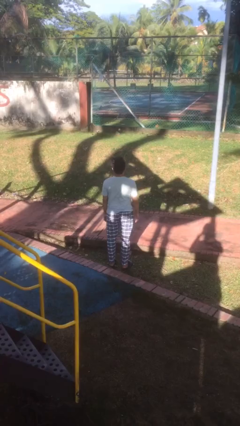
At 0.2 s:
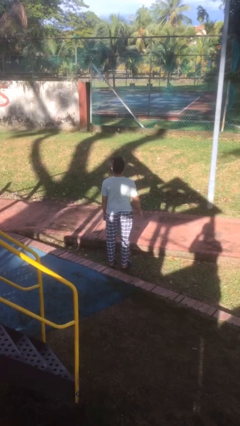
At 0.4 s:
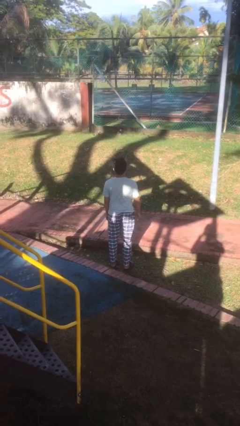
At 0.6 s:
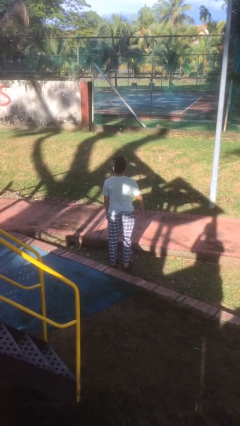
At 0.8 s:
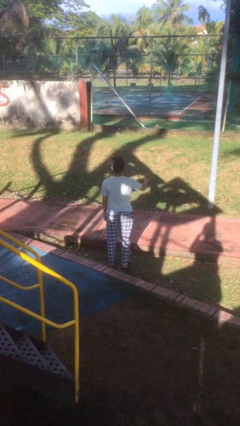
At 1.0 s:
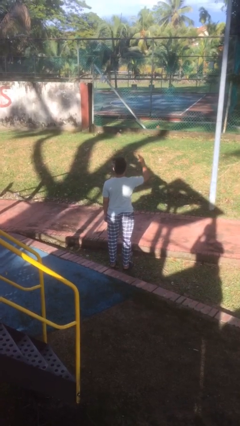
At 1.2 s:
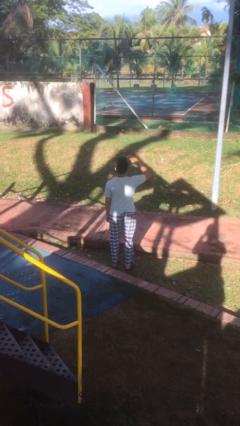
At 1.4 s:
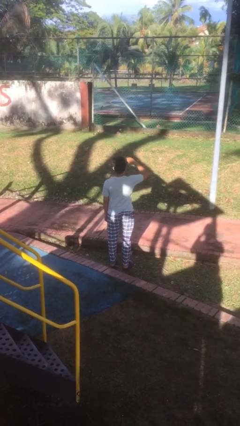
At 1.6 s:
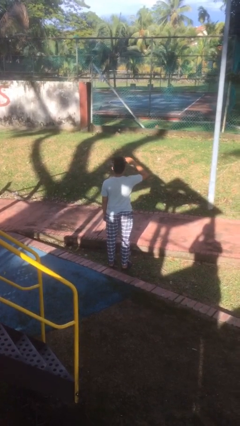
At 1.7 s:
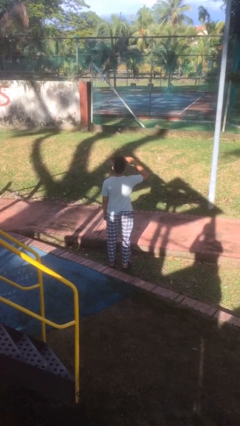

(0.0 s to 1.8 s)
person salutes

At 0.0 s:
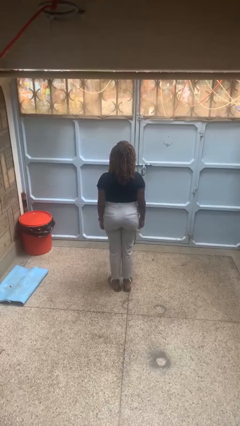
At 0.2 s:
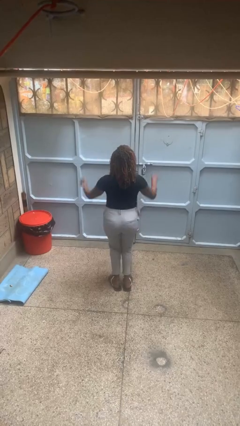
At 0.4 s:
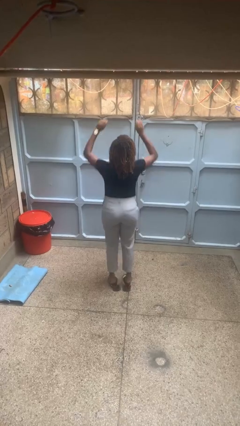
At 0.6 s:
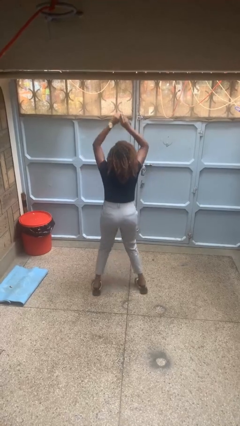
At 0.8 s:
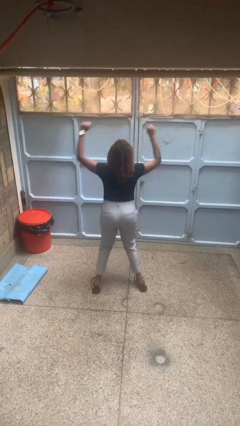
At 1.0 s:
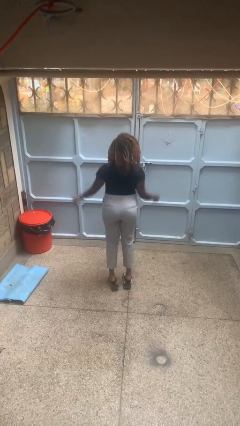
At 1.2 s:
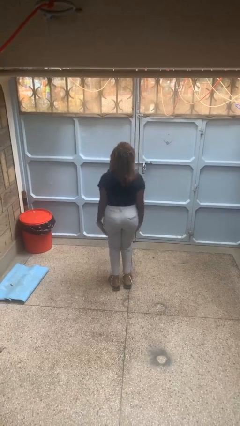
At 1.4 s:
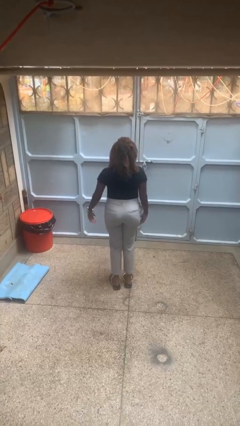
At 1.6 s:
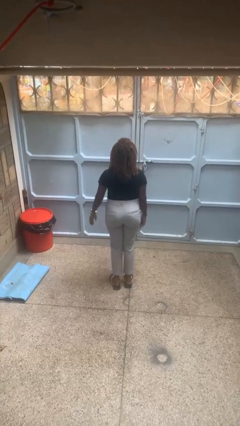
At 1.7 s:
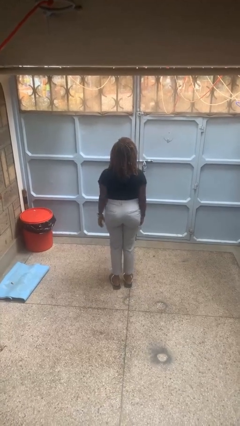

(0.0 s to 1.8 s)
person exercises with jumping jacks

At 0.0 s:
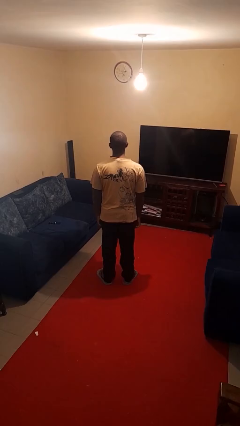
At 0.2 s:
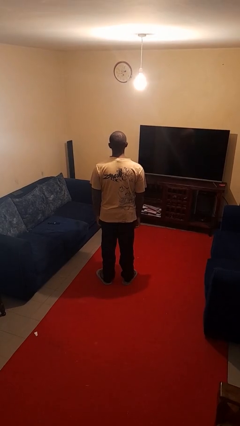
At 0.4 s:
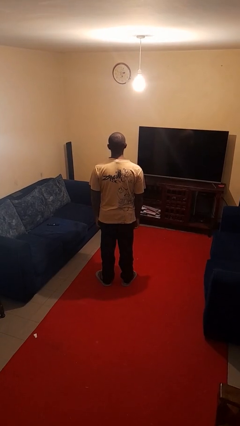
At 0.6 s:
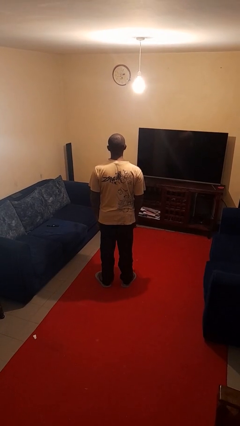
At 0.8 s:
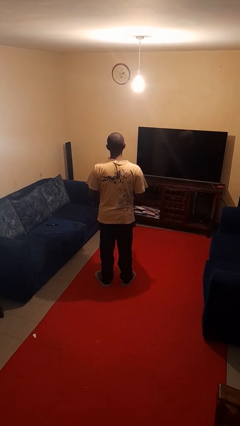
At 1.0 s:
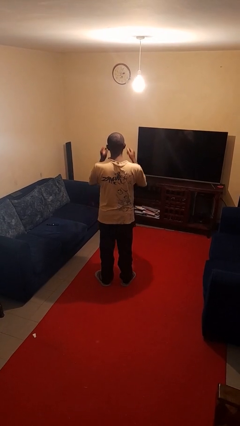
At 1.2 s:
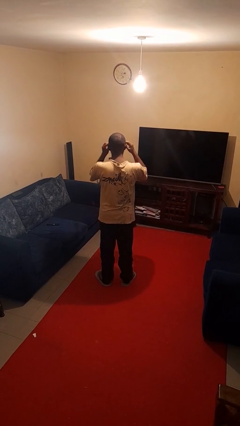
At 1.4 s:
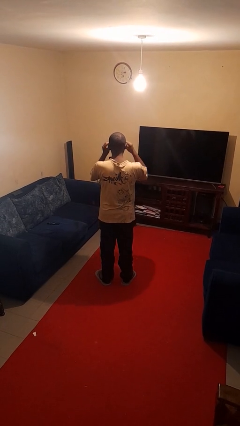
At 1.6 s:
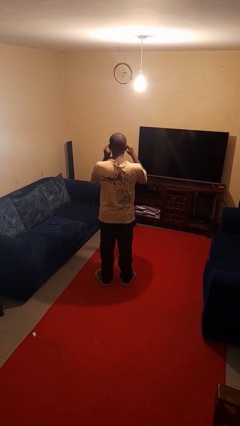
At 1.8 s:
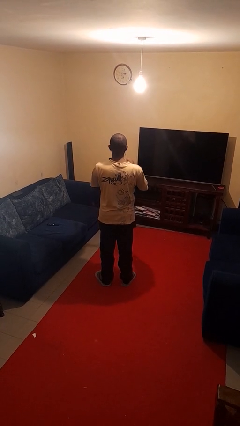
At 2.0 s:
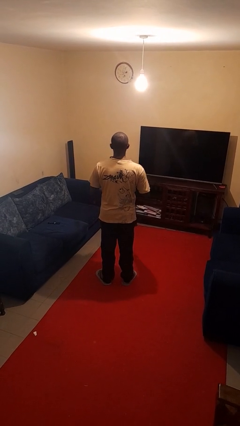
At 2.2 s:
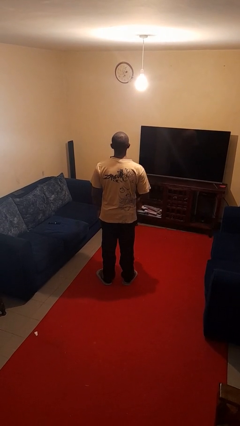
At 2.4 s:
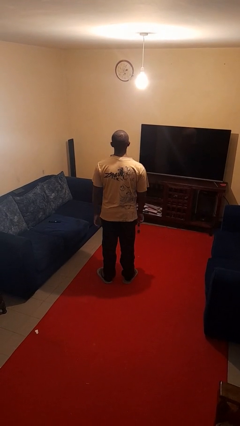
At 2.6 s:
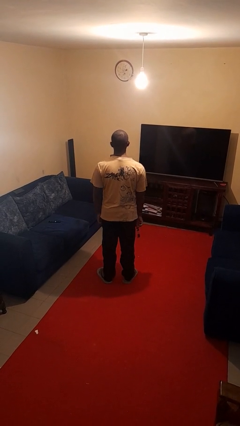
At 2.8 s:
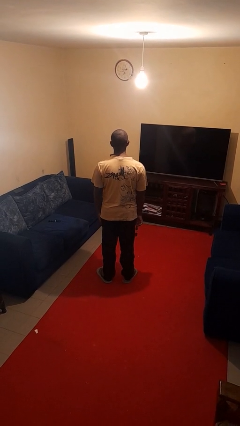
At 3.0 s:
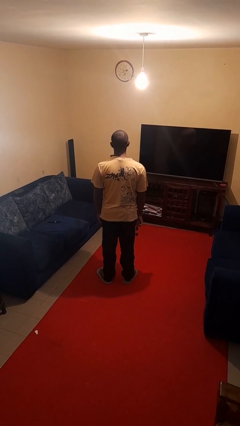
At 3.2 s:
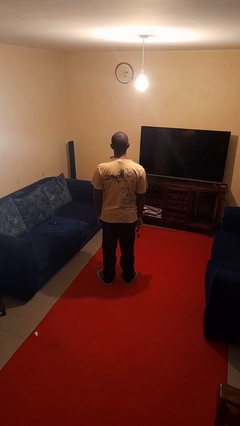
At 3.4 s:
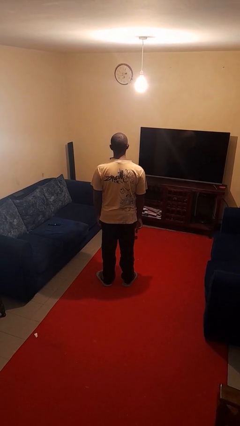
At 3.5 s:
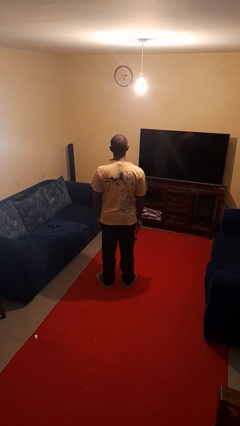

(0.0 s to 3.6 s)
person takes off sunglasses

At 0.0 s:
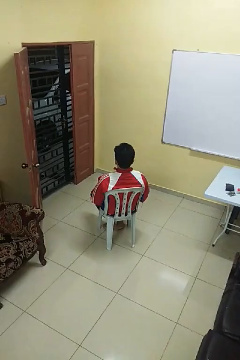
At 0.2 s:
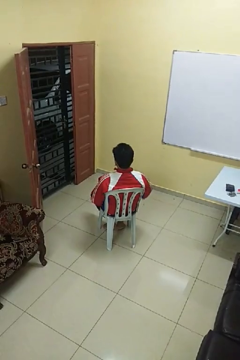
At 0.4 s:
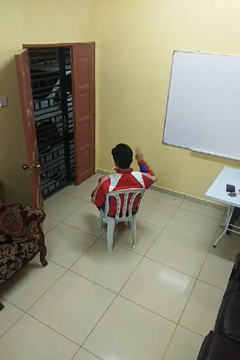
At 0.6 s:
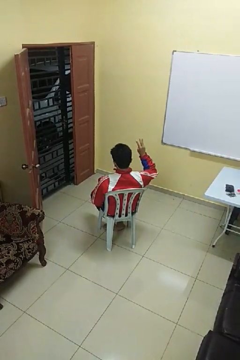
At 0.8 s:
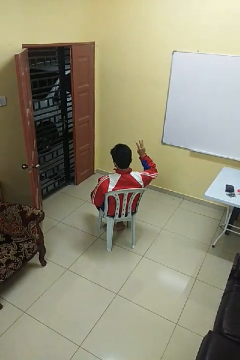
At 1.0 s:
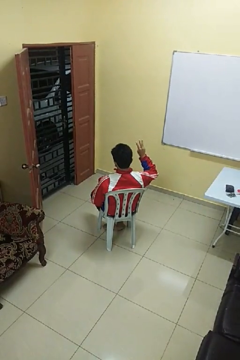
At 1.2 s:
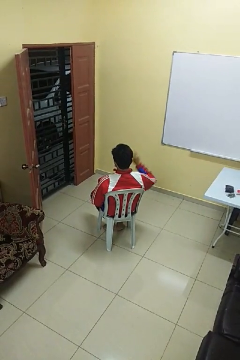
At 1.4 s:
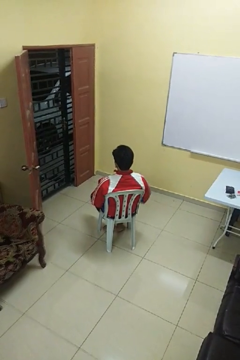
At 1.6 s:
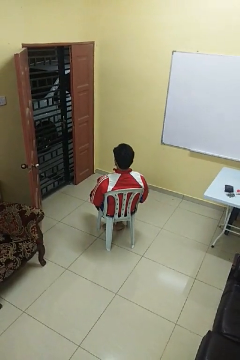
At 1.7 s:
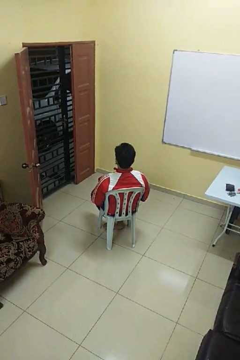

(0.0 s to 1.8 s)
person gestures number three

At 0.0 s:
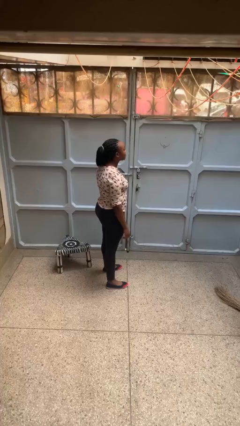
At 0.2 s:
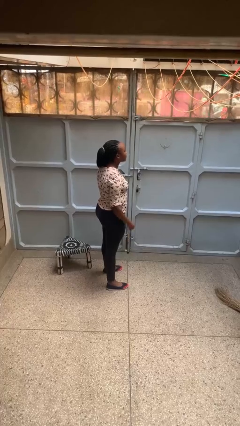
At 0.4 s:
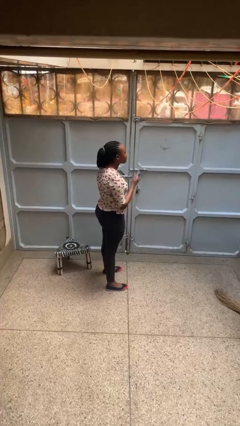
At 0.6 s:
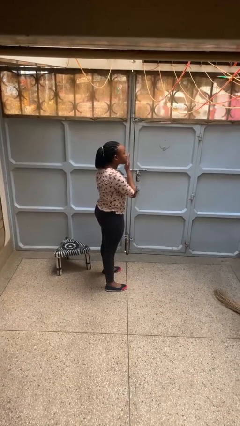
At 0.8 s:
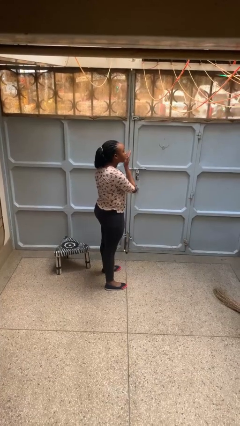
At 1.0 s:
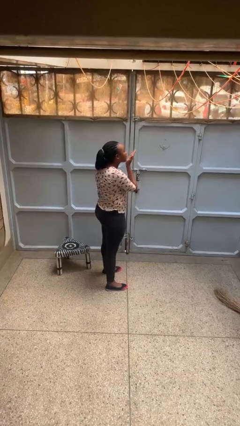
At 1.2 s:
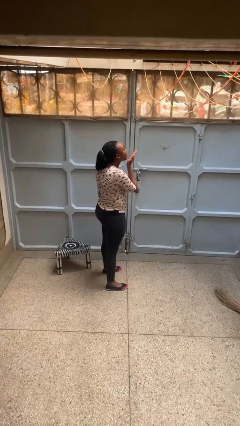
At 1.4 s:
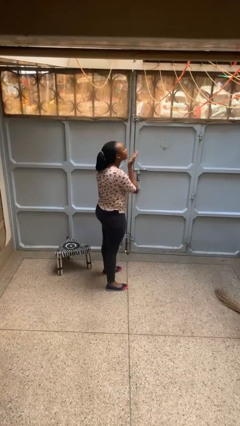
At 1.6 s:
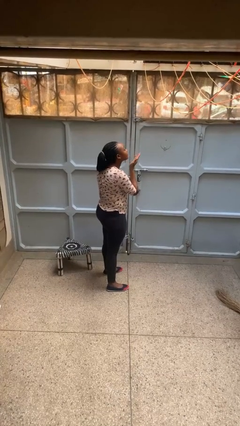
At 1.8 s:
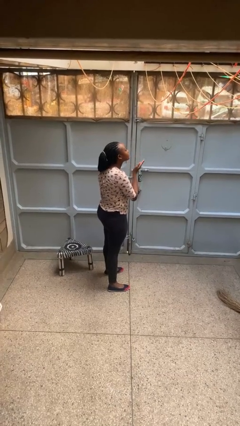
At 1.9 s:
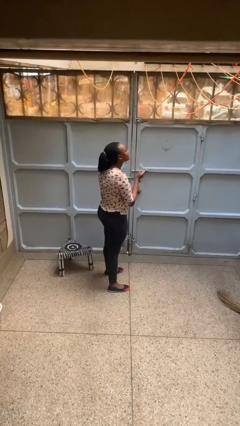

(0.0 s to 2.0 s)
person gestures blow kiss

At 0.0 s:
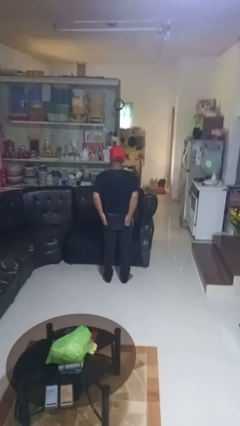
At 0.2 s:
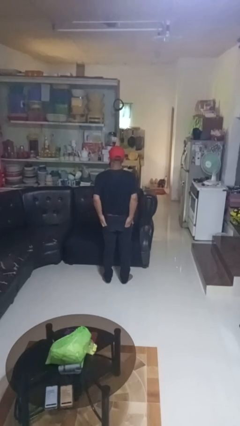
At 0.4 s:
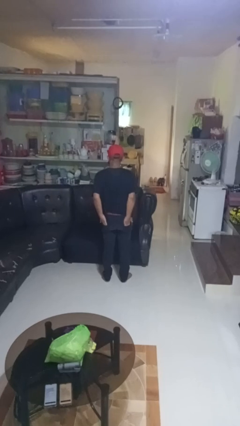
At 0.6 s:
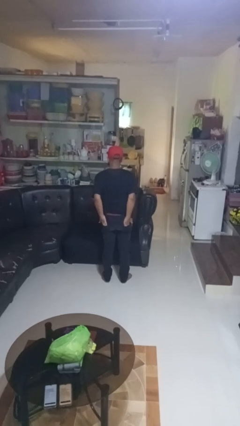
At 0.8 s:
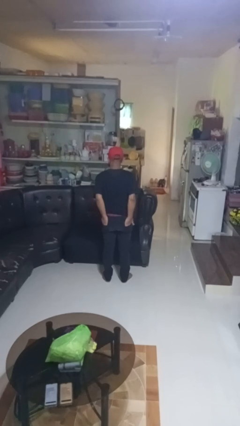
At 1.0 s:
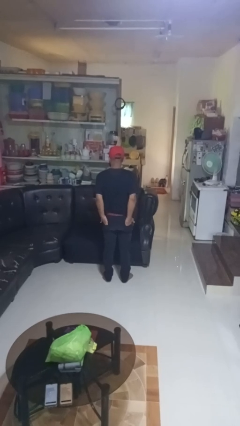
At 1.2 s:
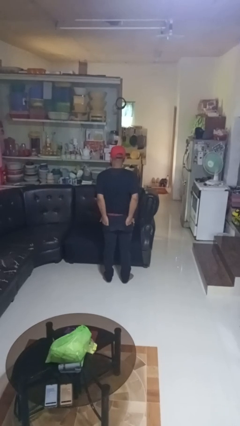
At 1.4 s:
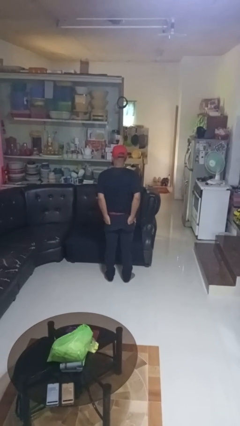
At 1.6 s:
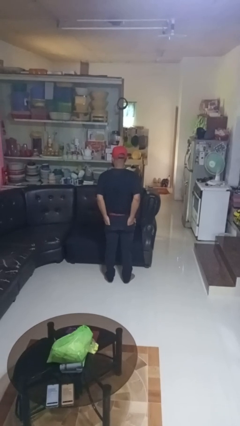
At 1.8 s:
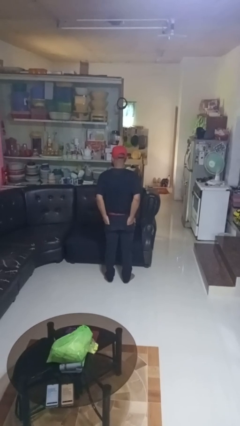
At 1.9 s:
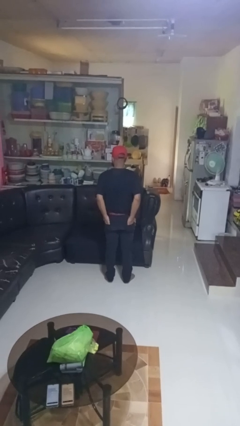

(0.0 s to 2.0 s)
person puts hands in back pockets

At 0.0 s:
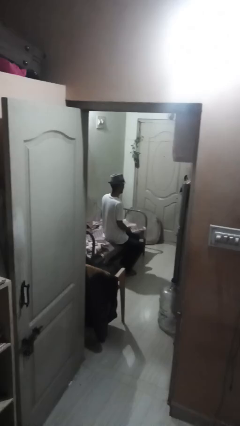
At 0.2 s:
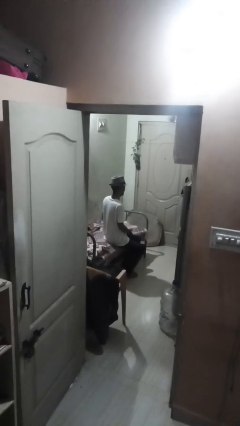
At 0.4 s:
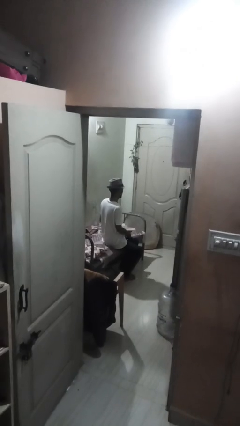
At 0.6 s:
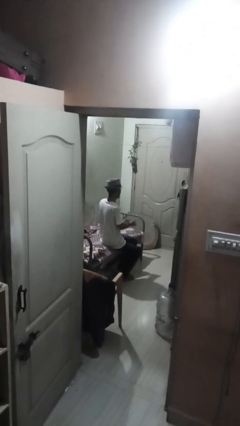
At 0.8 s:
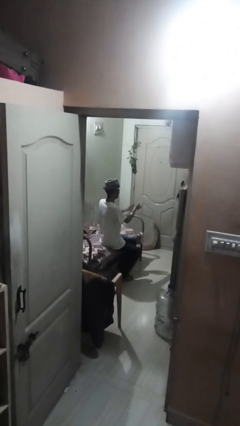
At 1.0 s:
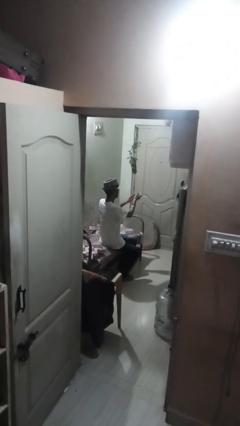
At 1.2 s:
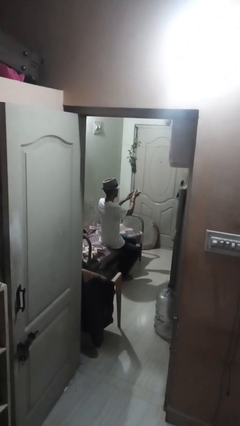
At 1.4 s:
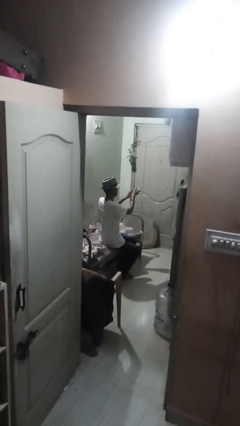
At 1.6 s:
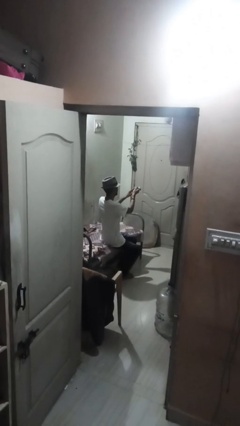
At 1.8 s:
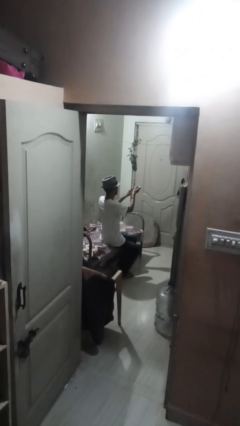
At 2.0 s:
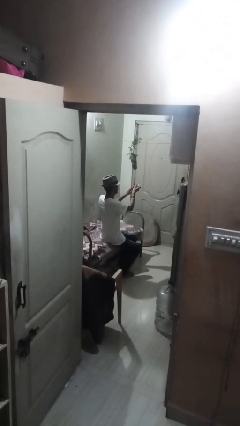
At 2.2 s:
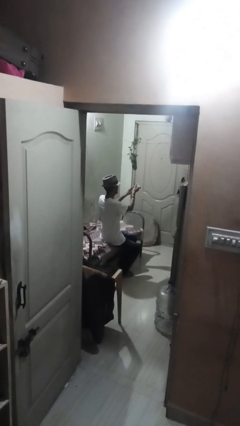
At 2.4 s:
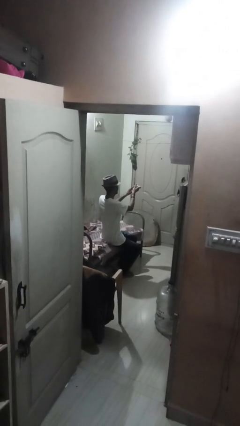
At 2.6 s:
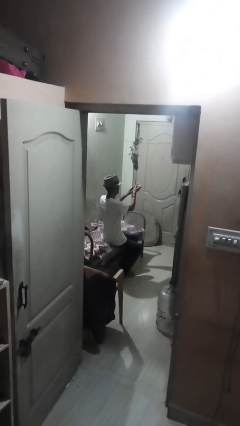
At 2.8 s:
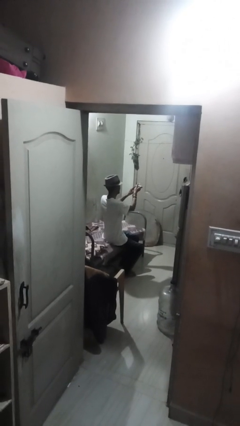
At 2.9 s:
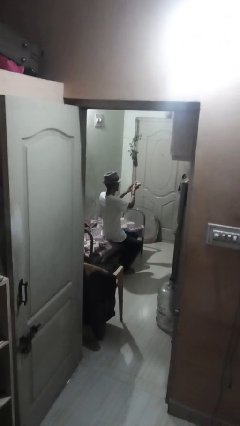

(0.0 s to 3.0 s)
person clips fingernails

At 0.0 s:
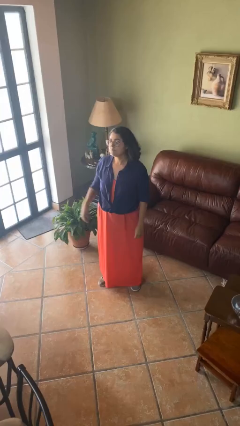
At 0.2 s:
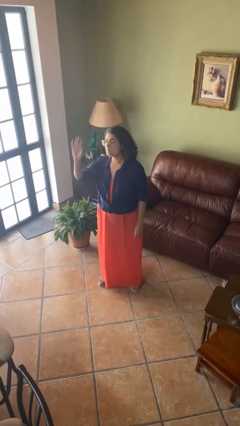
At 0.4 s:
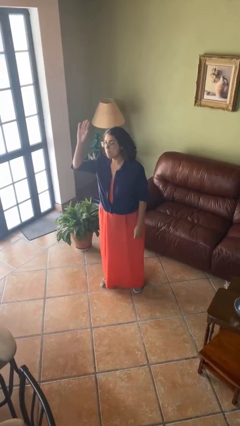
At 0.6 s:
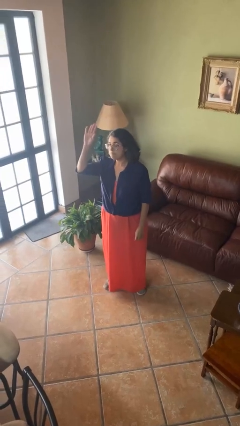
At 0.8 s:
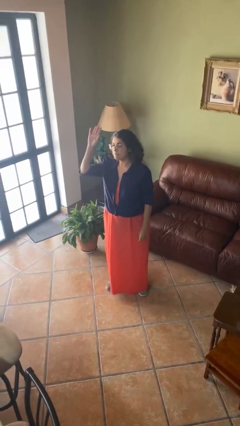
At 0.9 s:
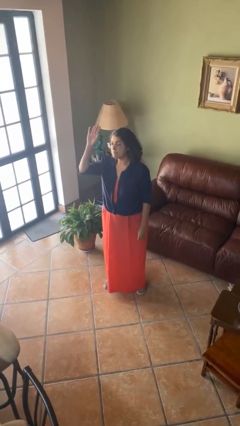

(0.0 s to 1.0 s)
person gestures raise hand
